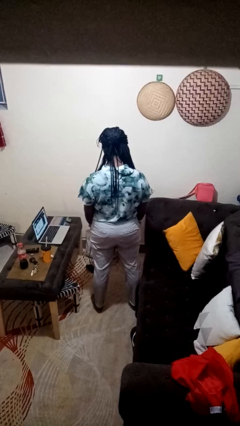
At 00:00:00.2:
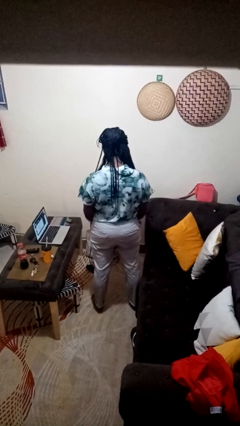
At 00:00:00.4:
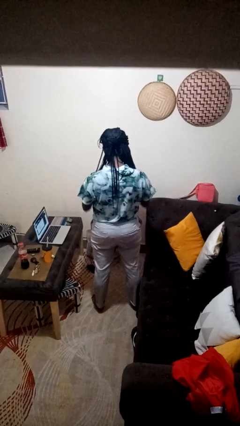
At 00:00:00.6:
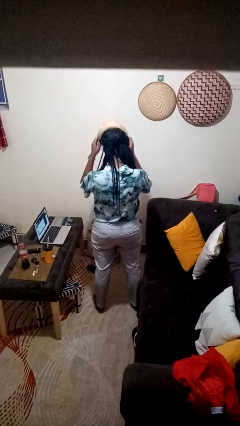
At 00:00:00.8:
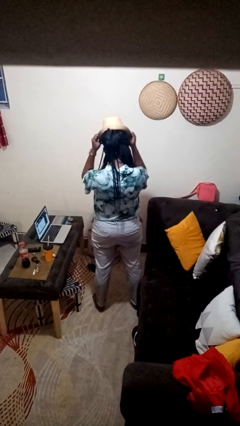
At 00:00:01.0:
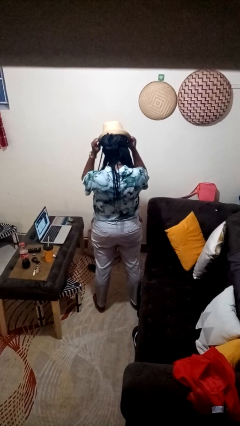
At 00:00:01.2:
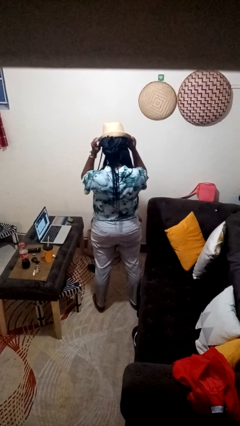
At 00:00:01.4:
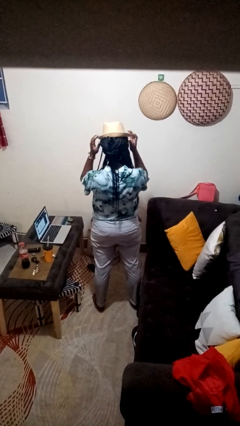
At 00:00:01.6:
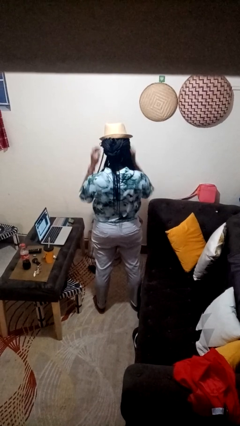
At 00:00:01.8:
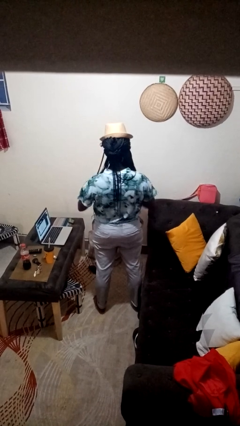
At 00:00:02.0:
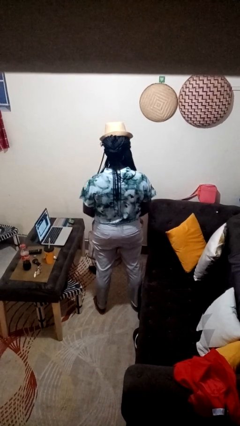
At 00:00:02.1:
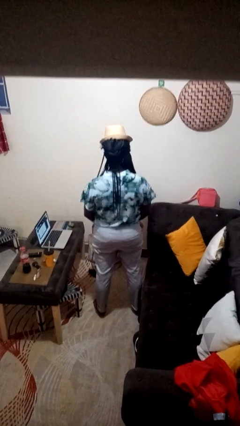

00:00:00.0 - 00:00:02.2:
person puts on hat

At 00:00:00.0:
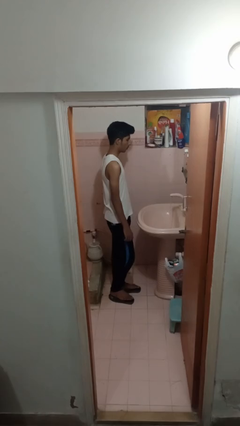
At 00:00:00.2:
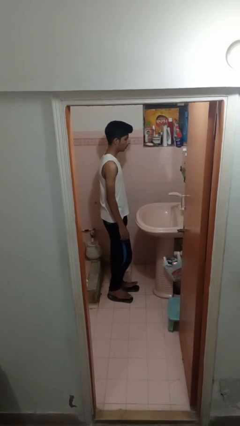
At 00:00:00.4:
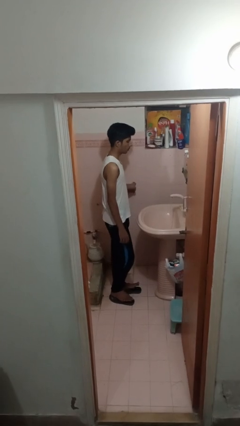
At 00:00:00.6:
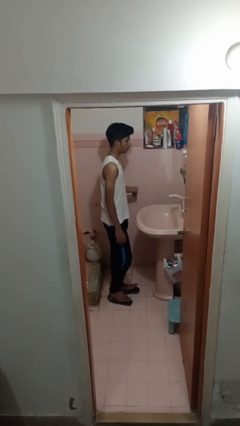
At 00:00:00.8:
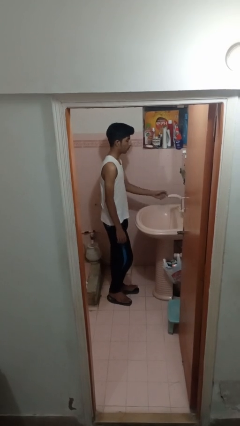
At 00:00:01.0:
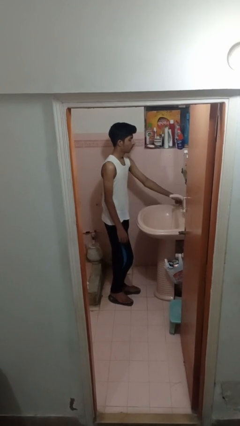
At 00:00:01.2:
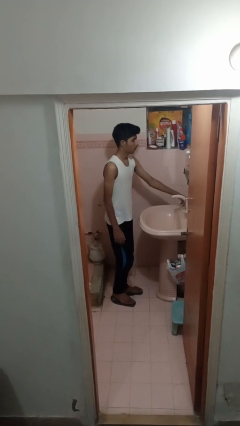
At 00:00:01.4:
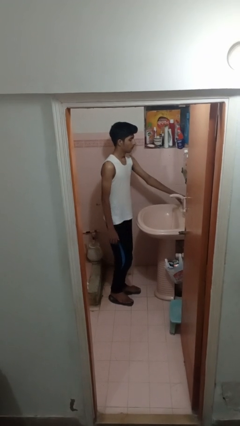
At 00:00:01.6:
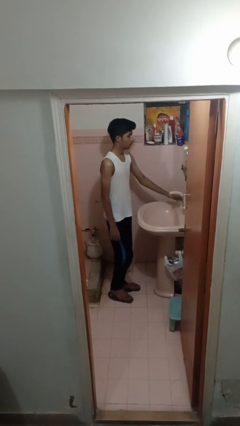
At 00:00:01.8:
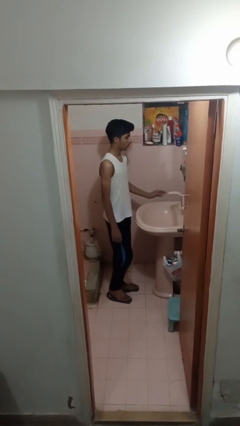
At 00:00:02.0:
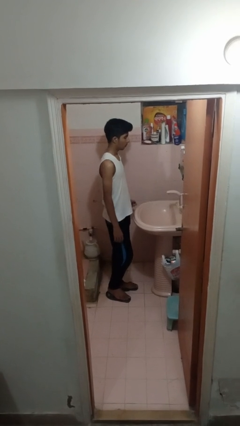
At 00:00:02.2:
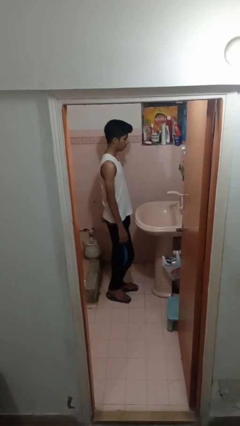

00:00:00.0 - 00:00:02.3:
person turns off faucet

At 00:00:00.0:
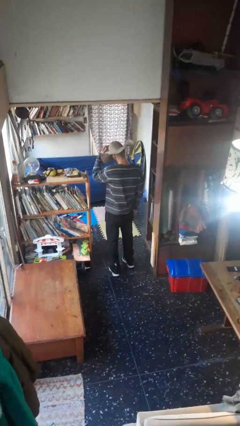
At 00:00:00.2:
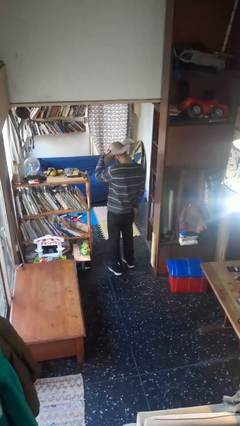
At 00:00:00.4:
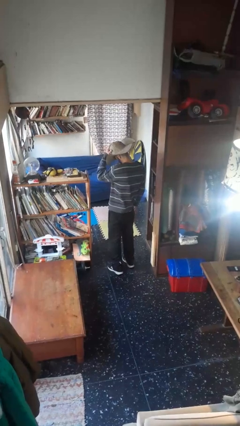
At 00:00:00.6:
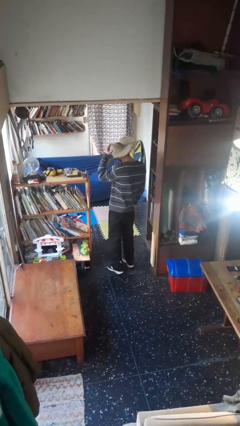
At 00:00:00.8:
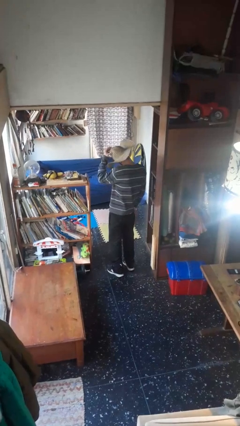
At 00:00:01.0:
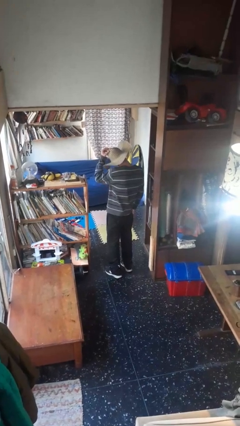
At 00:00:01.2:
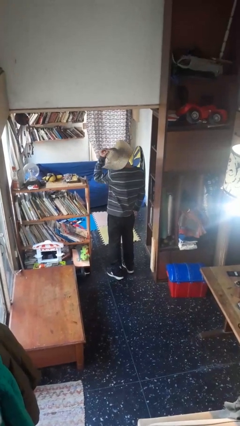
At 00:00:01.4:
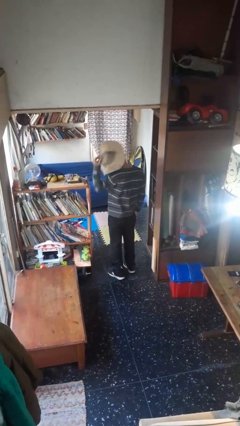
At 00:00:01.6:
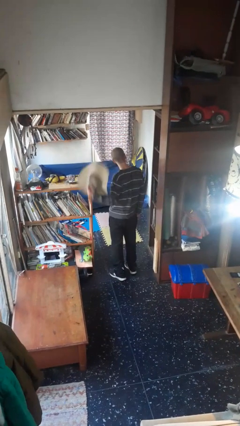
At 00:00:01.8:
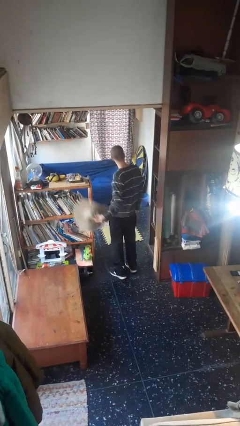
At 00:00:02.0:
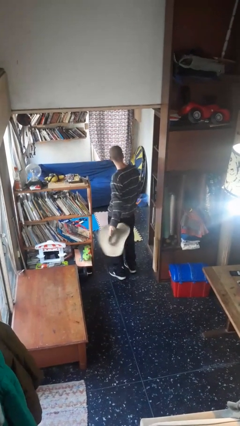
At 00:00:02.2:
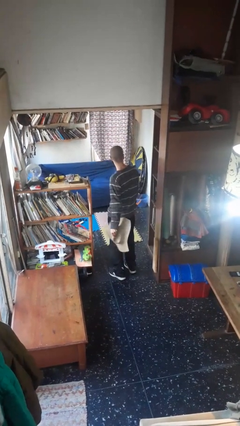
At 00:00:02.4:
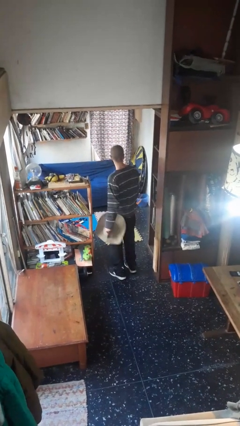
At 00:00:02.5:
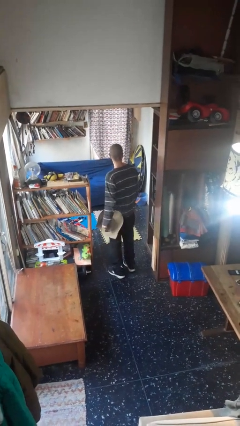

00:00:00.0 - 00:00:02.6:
person takes off hat

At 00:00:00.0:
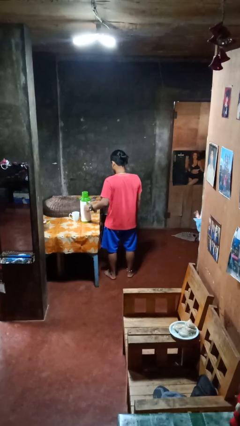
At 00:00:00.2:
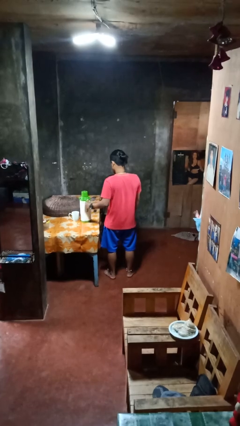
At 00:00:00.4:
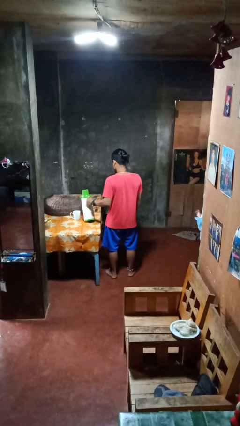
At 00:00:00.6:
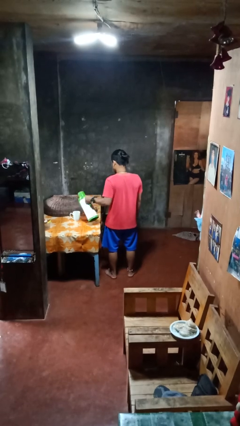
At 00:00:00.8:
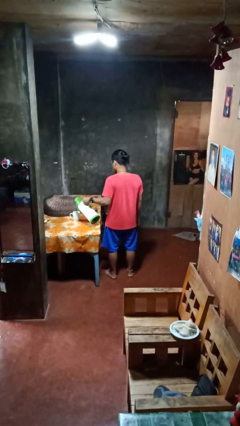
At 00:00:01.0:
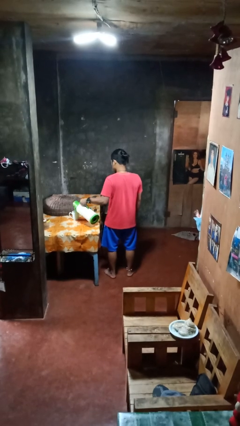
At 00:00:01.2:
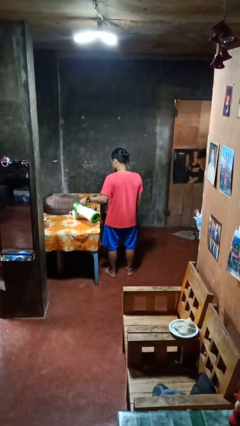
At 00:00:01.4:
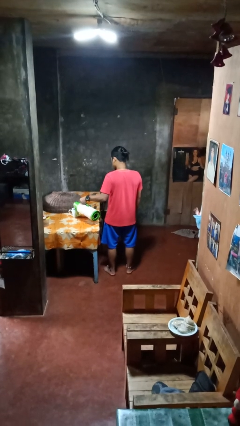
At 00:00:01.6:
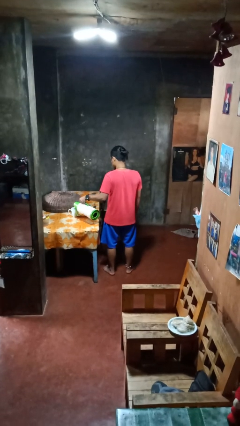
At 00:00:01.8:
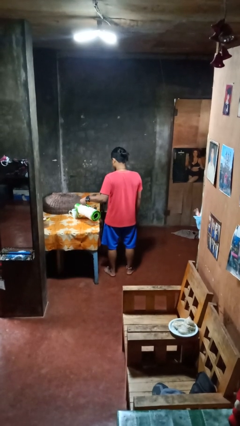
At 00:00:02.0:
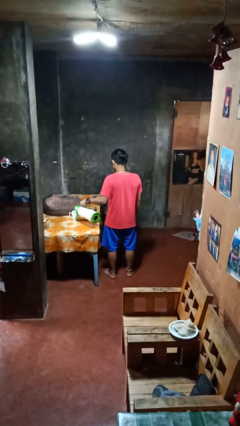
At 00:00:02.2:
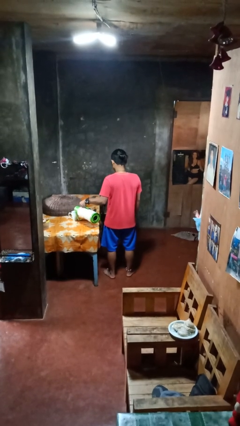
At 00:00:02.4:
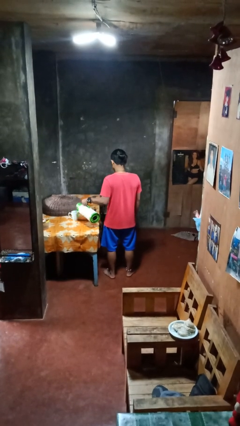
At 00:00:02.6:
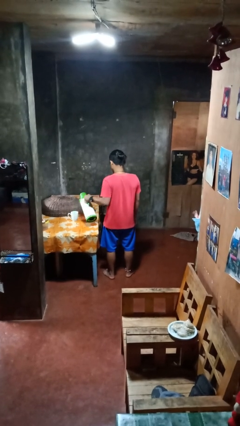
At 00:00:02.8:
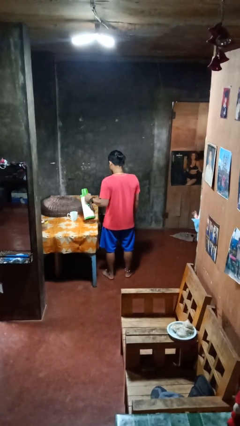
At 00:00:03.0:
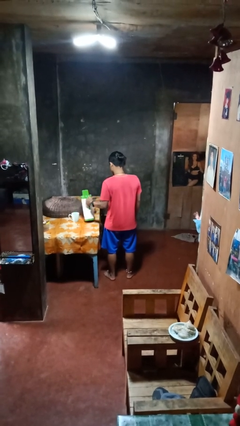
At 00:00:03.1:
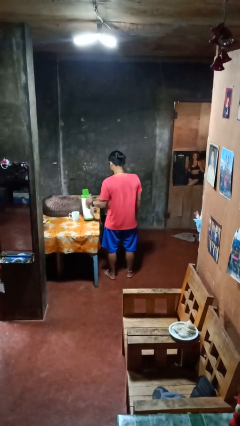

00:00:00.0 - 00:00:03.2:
person pours coffee into mug

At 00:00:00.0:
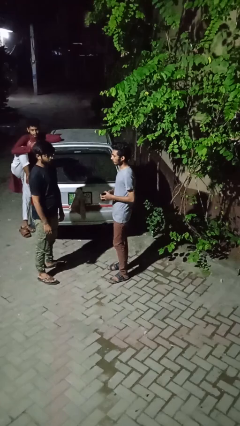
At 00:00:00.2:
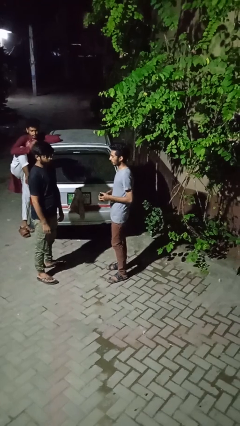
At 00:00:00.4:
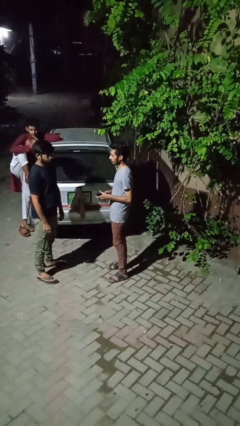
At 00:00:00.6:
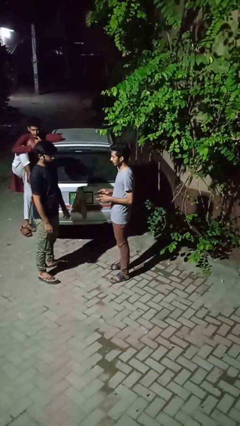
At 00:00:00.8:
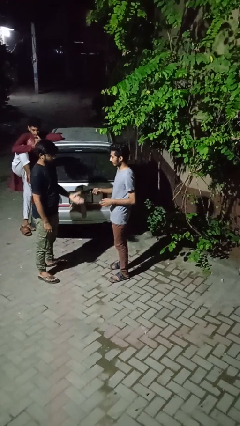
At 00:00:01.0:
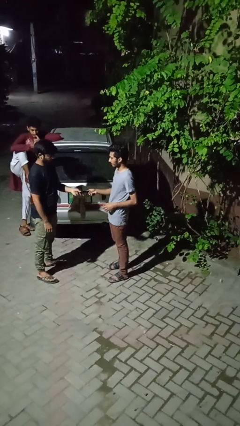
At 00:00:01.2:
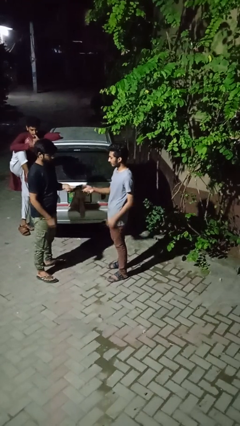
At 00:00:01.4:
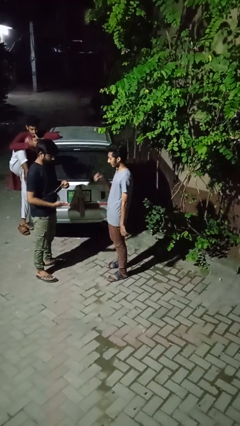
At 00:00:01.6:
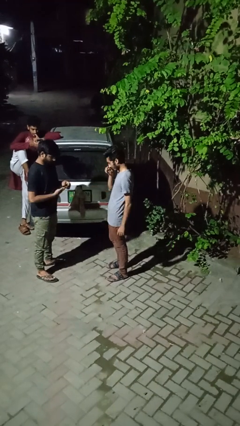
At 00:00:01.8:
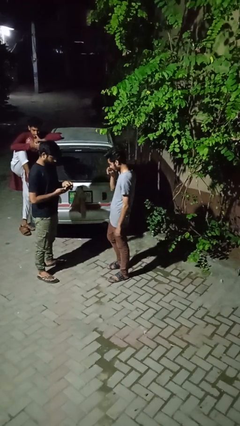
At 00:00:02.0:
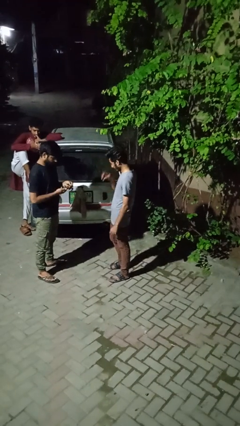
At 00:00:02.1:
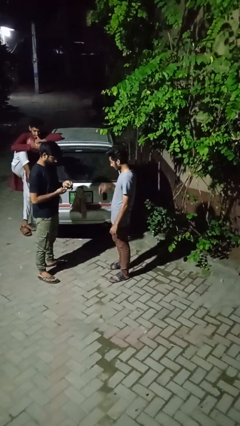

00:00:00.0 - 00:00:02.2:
person transfers object to person

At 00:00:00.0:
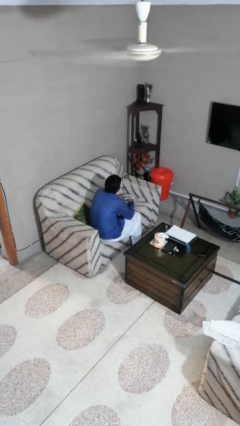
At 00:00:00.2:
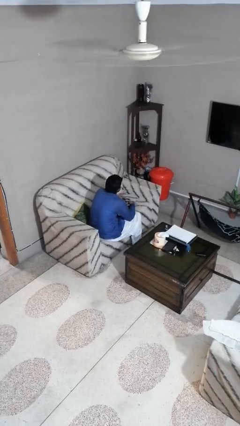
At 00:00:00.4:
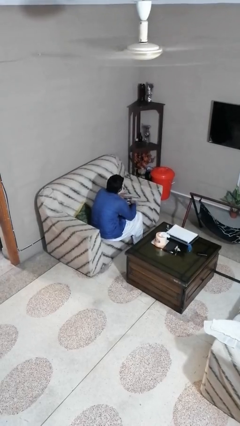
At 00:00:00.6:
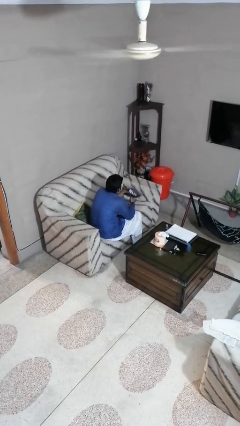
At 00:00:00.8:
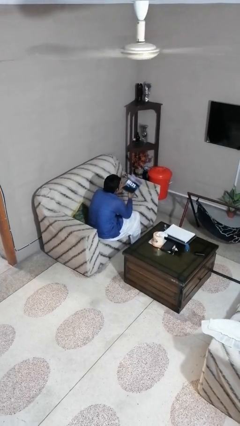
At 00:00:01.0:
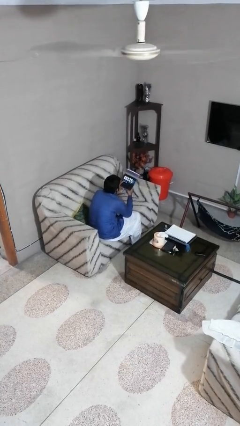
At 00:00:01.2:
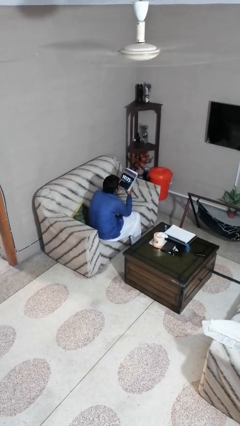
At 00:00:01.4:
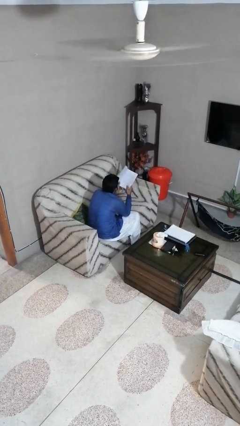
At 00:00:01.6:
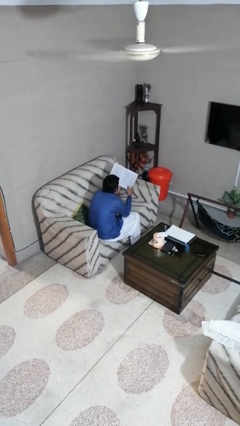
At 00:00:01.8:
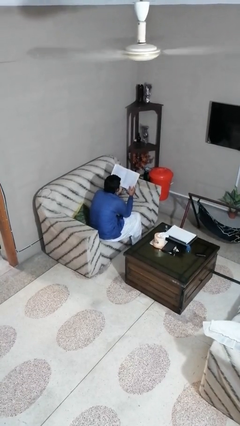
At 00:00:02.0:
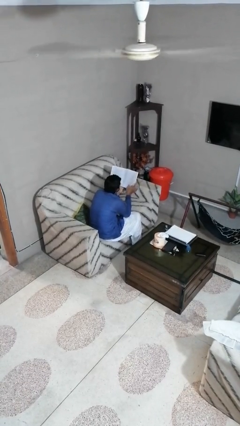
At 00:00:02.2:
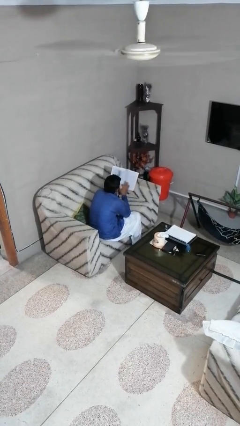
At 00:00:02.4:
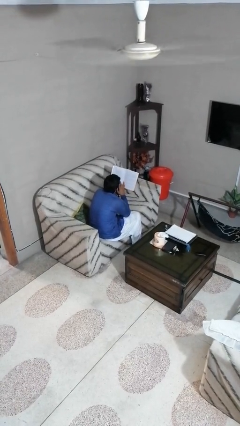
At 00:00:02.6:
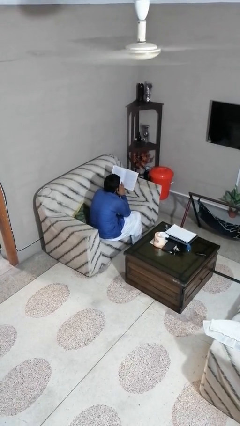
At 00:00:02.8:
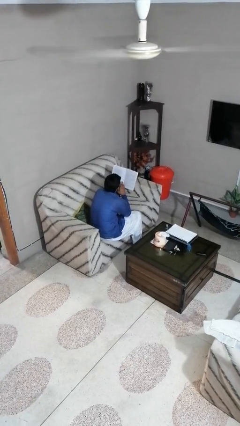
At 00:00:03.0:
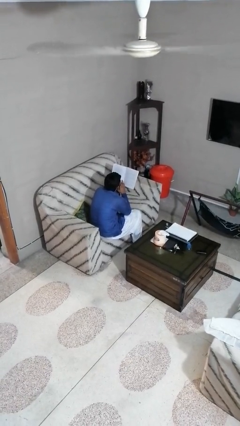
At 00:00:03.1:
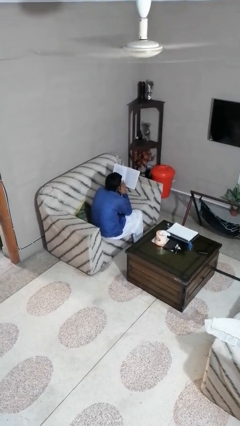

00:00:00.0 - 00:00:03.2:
person reads book

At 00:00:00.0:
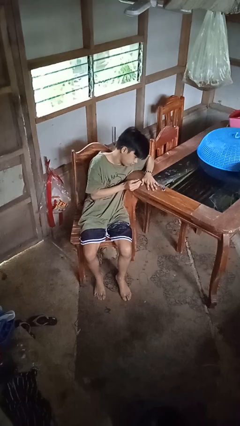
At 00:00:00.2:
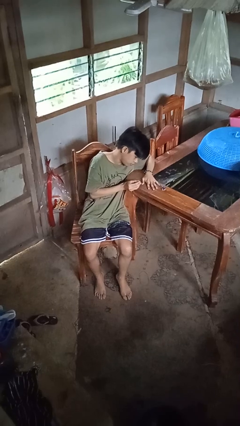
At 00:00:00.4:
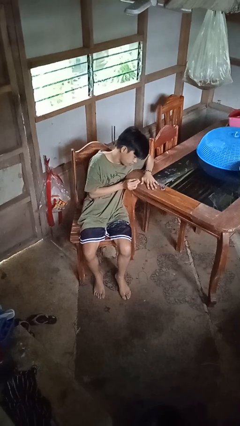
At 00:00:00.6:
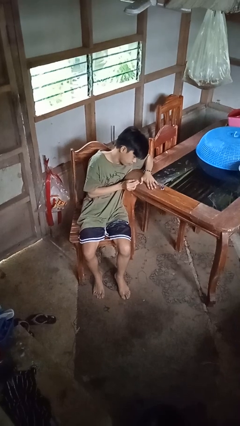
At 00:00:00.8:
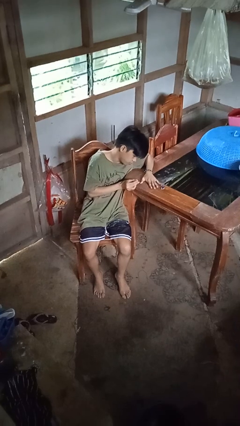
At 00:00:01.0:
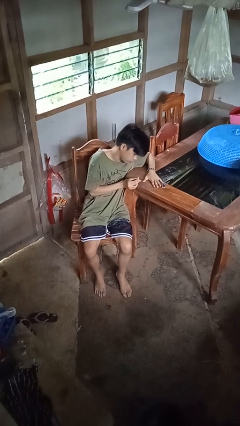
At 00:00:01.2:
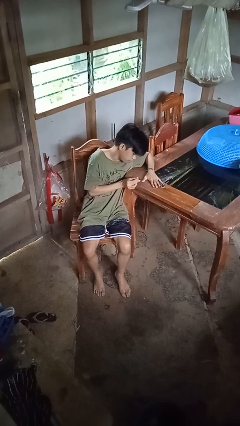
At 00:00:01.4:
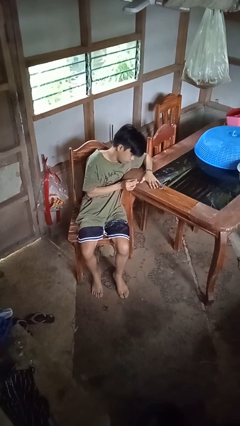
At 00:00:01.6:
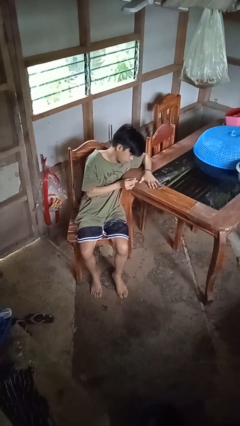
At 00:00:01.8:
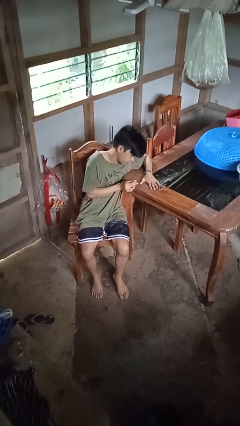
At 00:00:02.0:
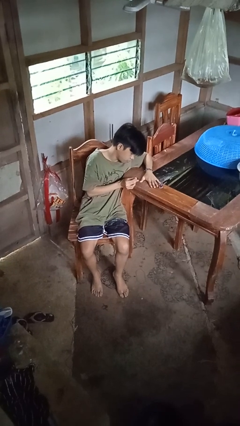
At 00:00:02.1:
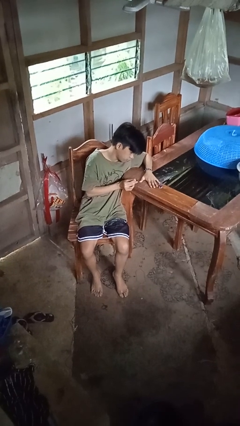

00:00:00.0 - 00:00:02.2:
person paints fingernails
